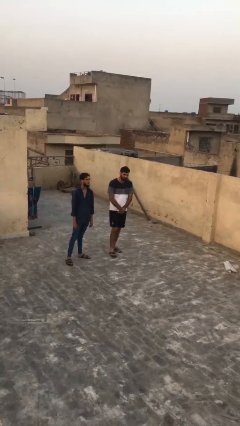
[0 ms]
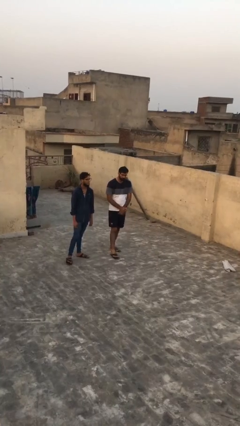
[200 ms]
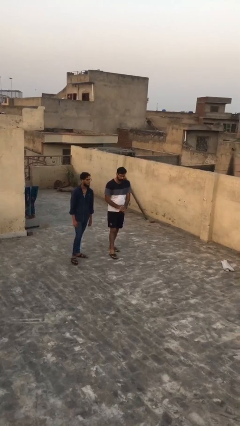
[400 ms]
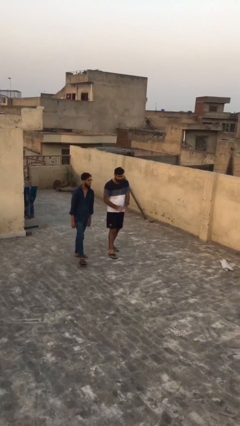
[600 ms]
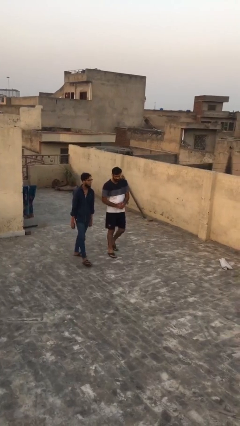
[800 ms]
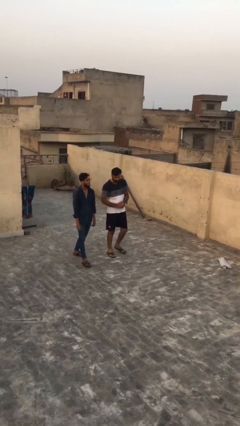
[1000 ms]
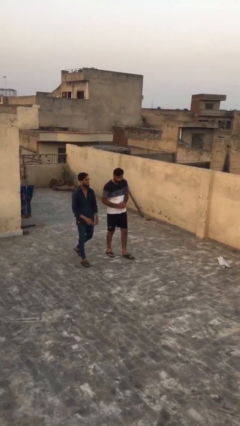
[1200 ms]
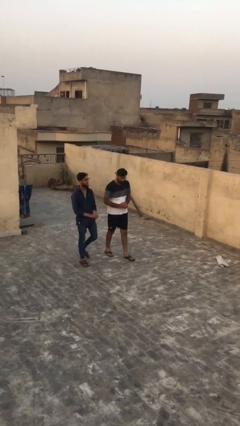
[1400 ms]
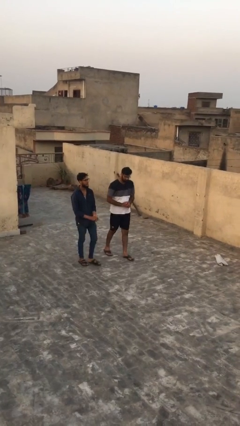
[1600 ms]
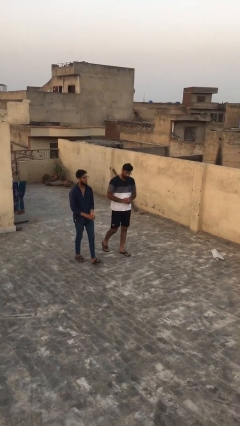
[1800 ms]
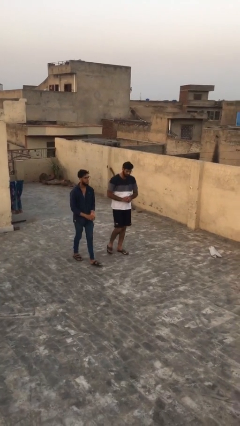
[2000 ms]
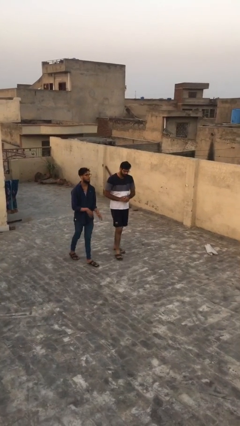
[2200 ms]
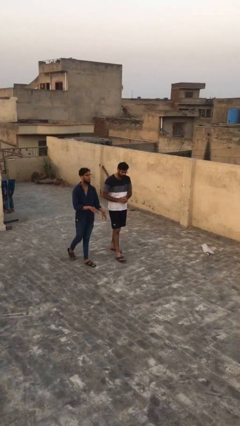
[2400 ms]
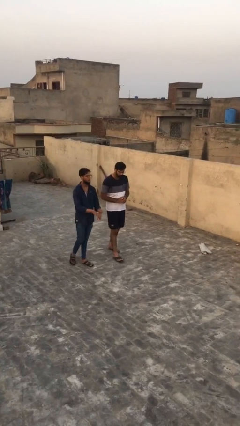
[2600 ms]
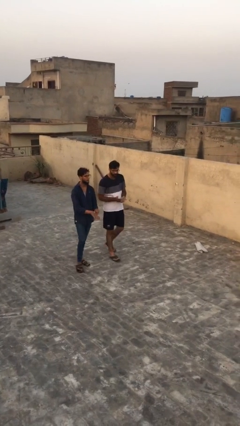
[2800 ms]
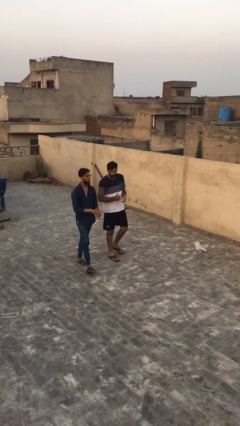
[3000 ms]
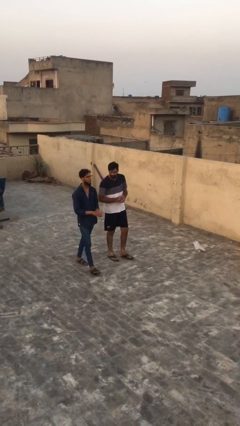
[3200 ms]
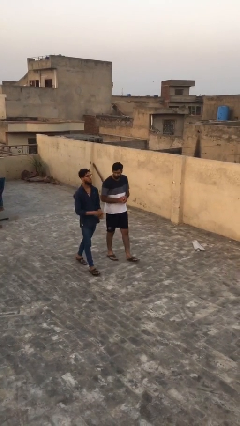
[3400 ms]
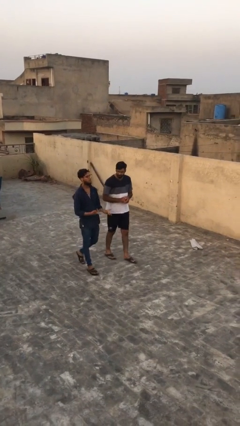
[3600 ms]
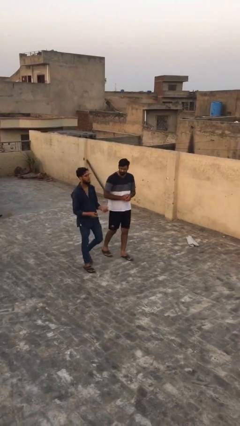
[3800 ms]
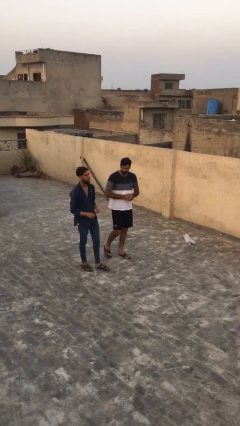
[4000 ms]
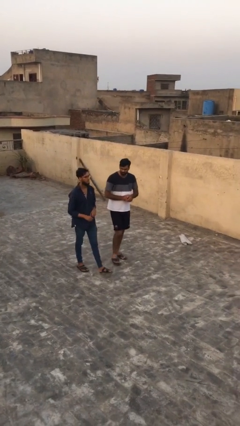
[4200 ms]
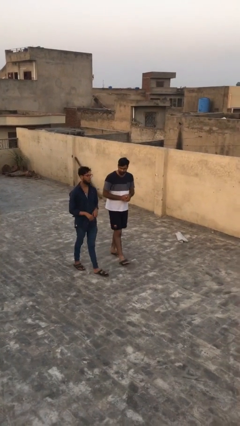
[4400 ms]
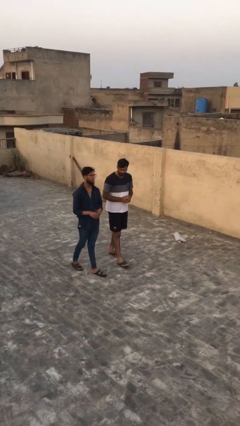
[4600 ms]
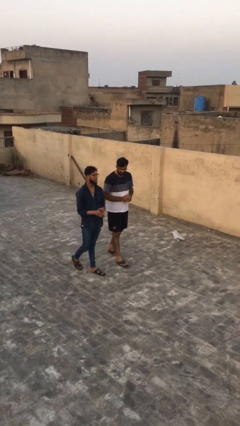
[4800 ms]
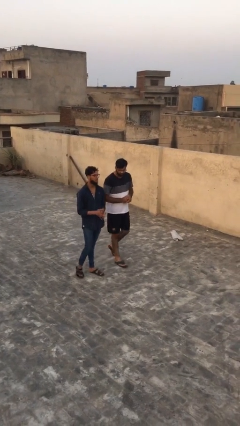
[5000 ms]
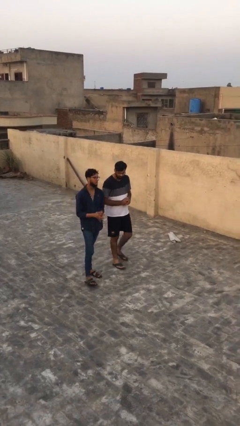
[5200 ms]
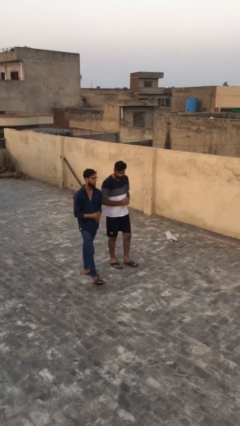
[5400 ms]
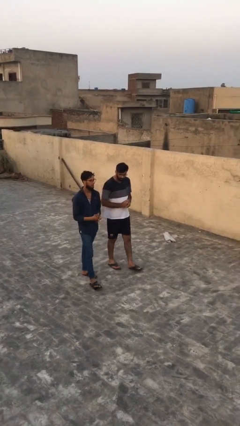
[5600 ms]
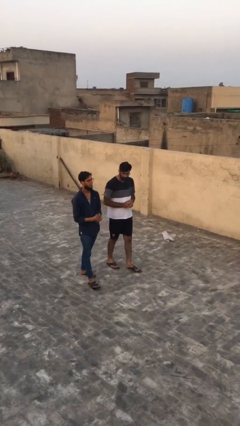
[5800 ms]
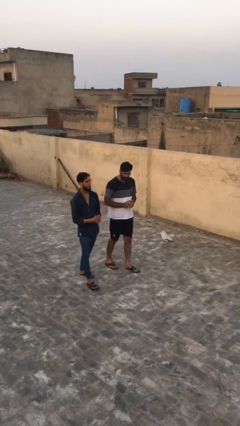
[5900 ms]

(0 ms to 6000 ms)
person talks to person

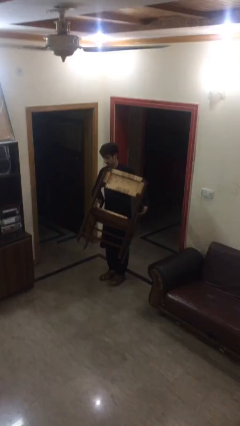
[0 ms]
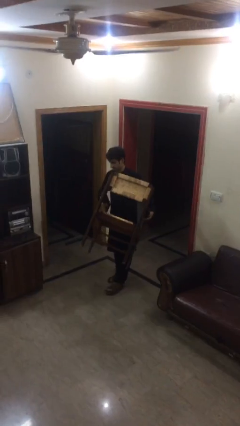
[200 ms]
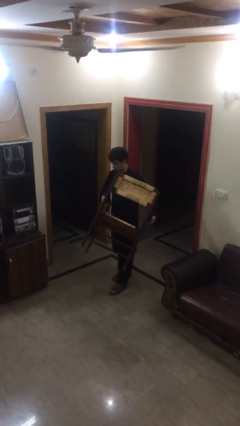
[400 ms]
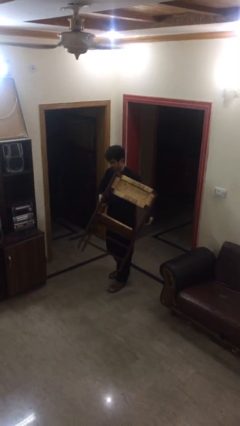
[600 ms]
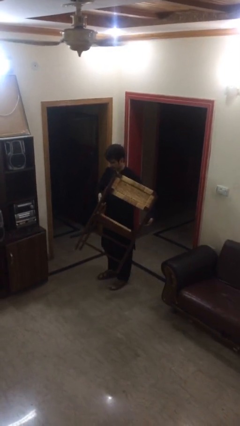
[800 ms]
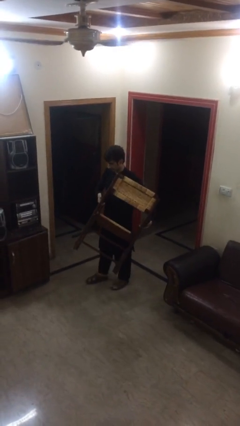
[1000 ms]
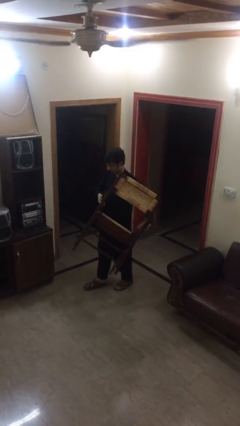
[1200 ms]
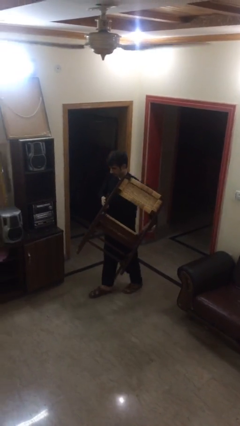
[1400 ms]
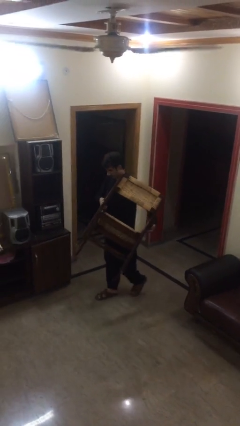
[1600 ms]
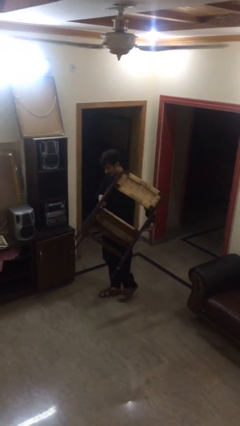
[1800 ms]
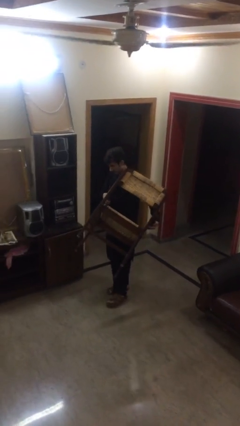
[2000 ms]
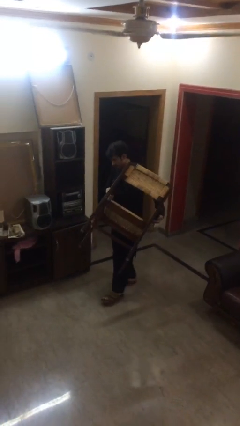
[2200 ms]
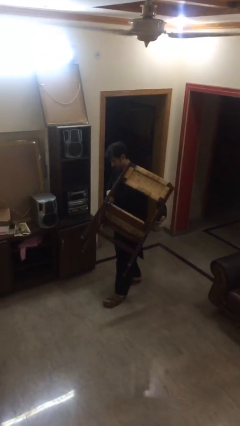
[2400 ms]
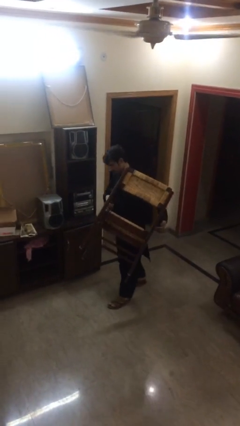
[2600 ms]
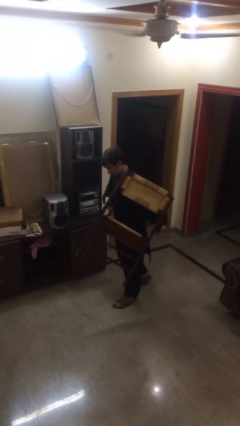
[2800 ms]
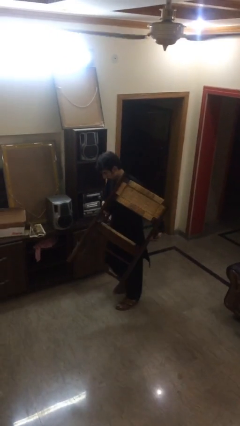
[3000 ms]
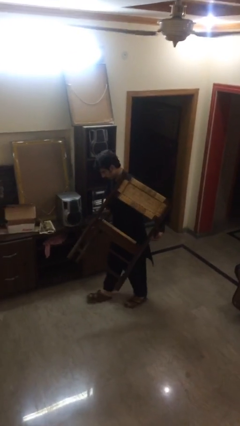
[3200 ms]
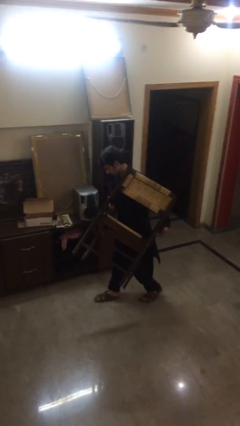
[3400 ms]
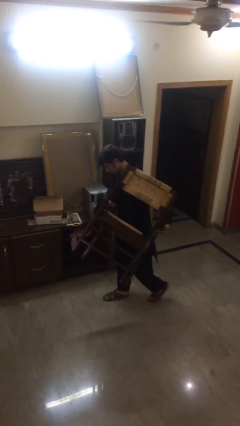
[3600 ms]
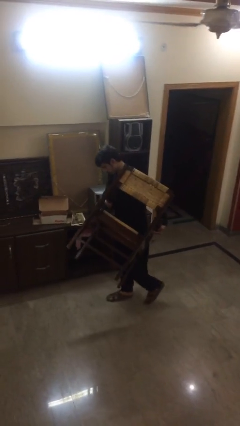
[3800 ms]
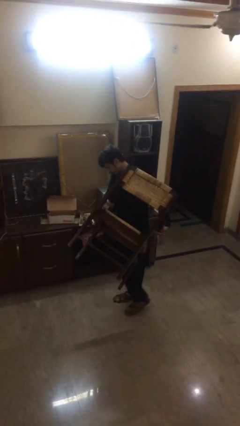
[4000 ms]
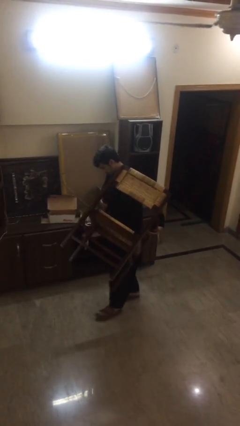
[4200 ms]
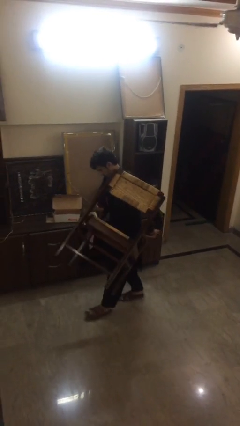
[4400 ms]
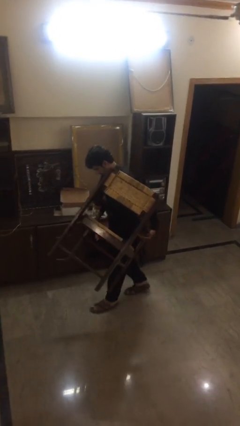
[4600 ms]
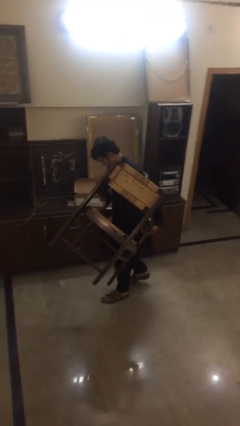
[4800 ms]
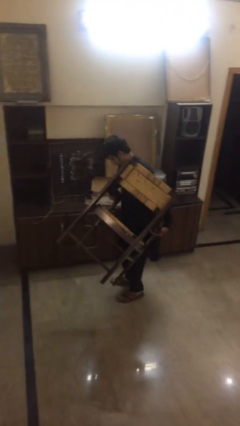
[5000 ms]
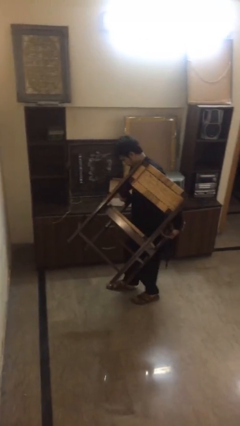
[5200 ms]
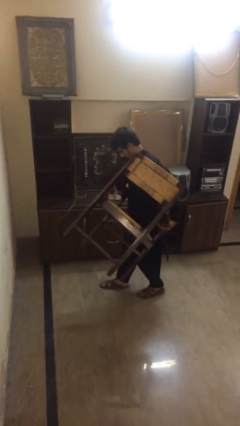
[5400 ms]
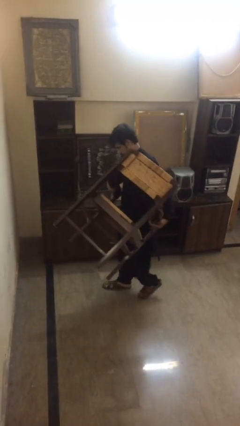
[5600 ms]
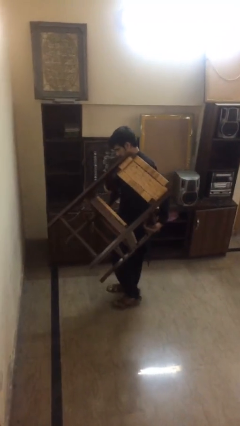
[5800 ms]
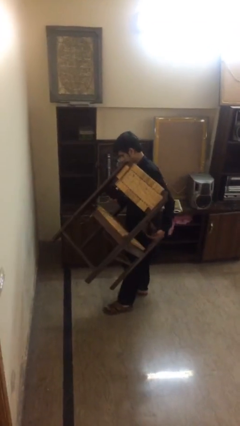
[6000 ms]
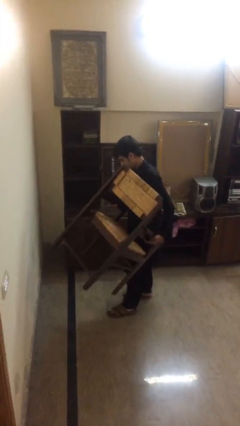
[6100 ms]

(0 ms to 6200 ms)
person carries heavy object

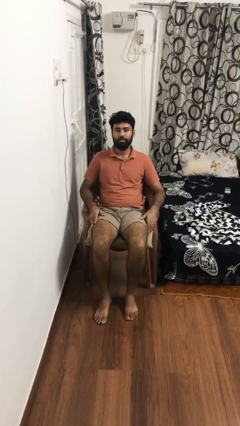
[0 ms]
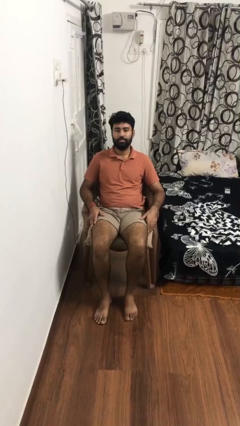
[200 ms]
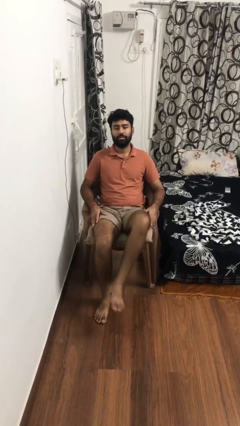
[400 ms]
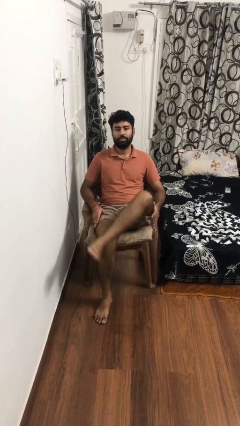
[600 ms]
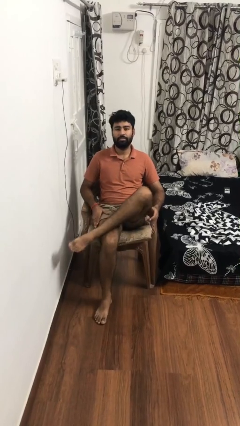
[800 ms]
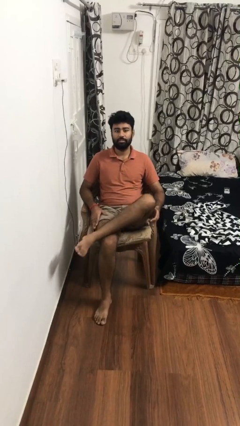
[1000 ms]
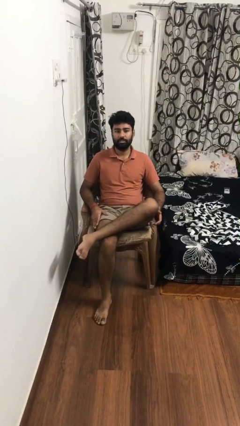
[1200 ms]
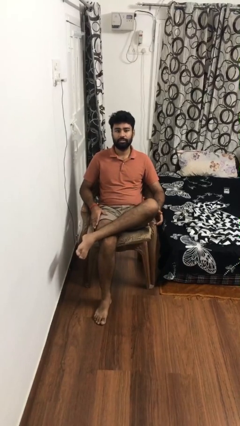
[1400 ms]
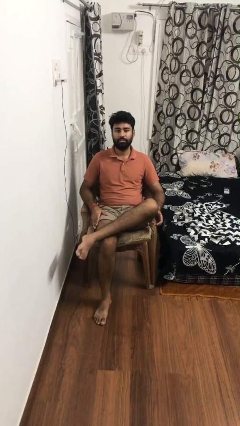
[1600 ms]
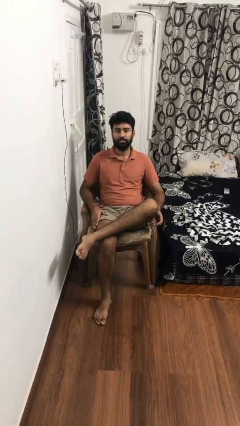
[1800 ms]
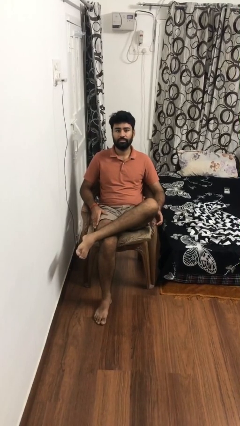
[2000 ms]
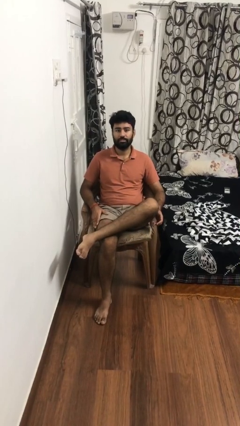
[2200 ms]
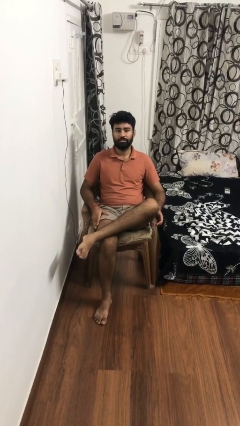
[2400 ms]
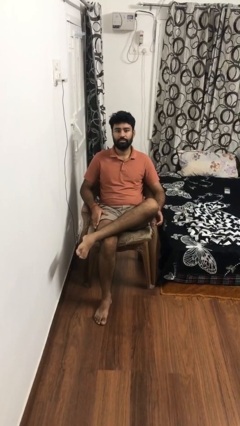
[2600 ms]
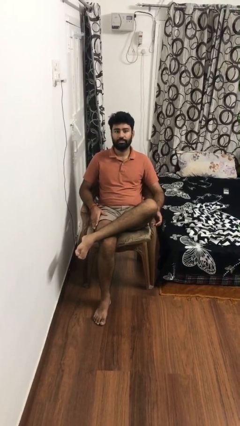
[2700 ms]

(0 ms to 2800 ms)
person crosses legs

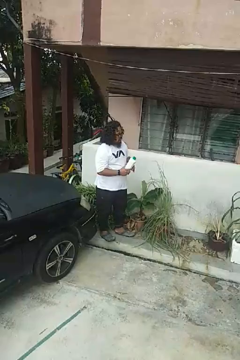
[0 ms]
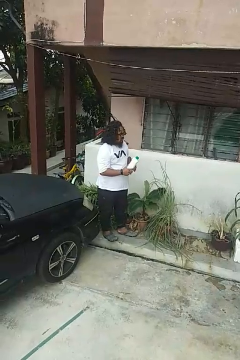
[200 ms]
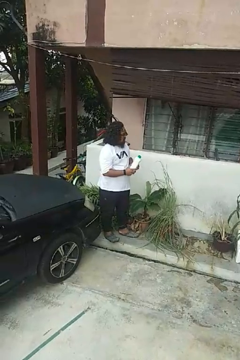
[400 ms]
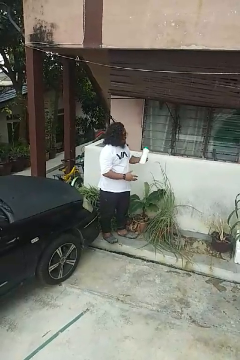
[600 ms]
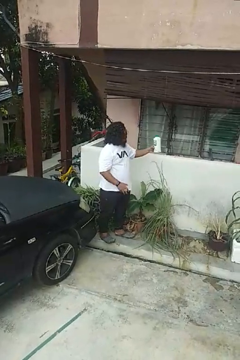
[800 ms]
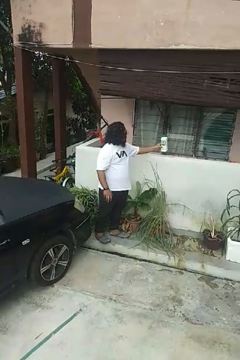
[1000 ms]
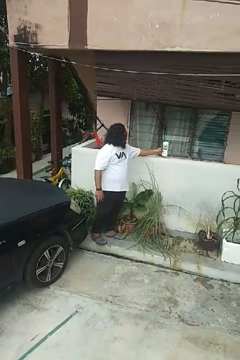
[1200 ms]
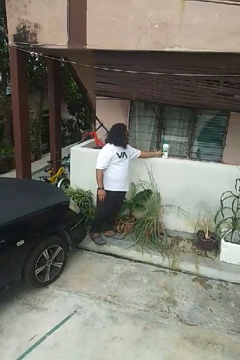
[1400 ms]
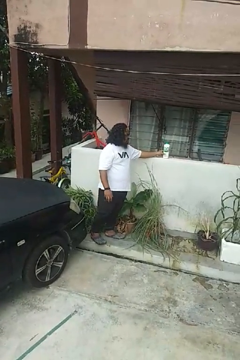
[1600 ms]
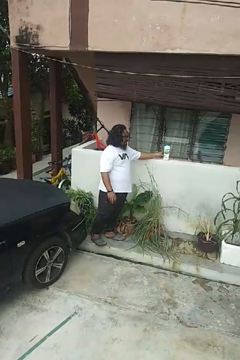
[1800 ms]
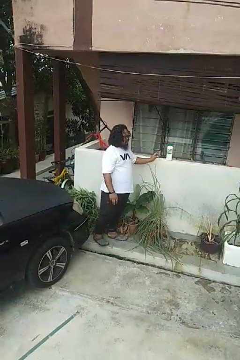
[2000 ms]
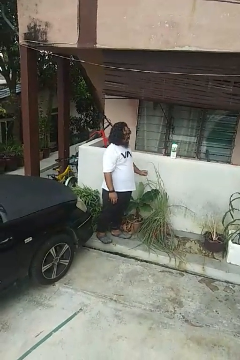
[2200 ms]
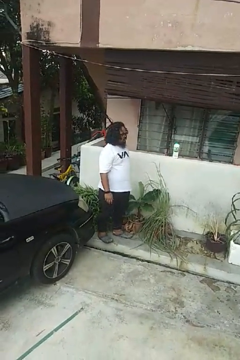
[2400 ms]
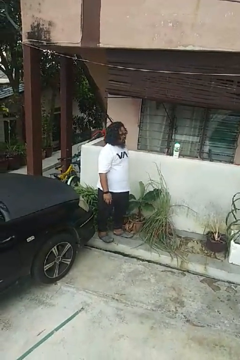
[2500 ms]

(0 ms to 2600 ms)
person puts down object on countertop

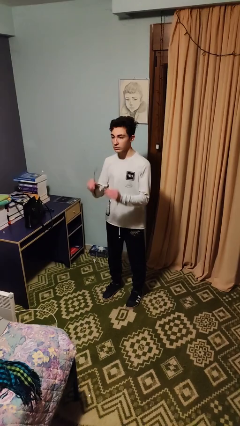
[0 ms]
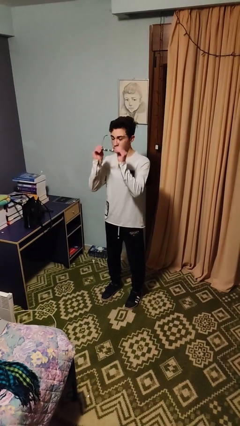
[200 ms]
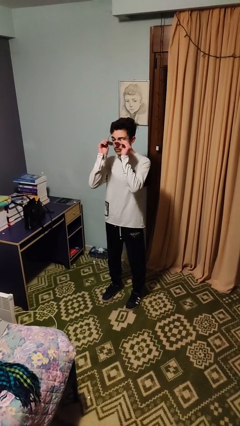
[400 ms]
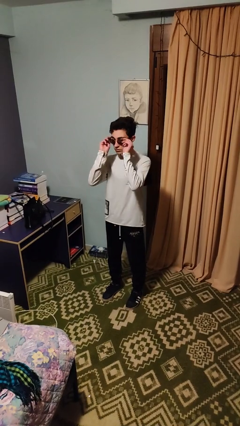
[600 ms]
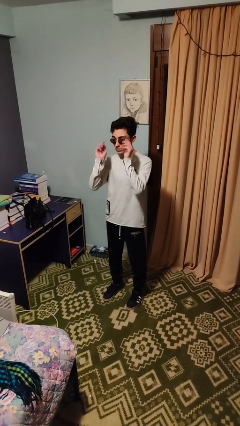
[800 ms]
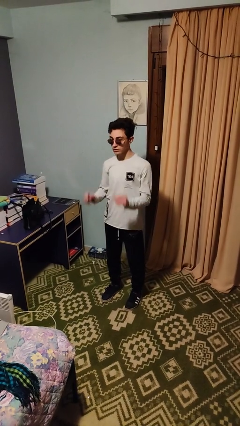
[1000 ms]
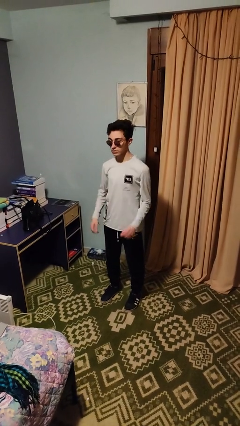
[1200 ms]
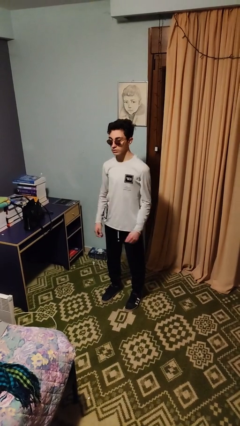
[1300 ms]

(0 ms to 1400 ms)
person puts on sunglasses
